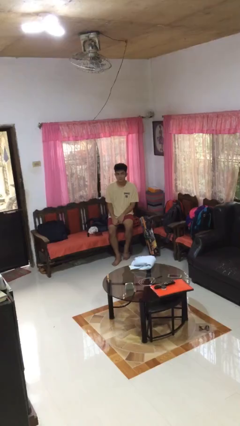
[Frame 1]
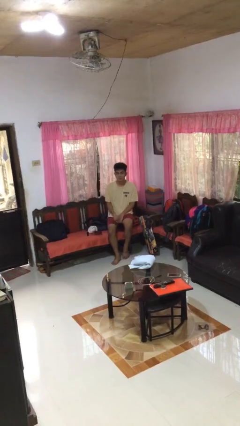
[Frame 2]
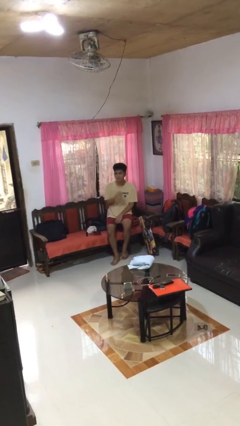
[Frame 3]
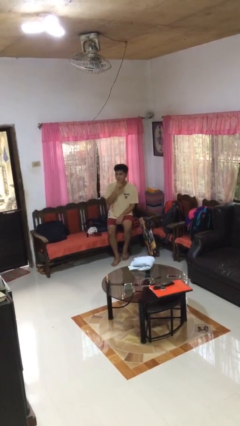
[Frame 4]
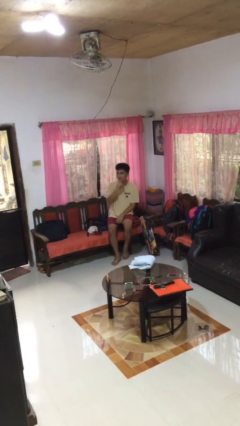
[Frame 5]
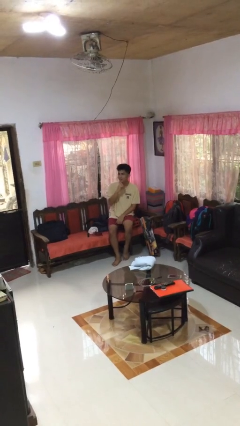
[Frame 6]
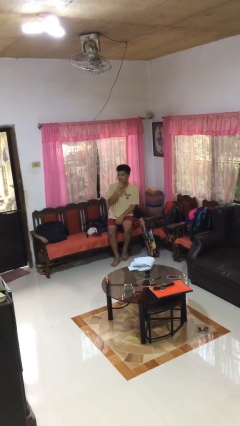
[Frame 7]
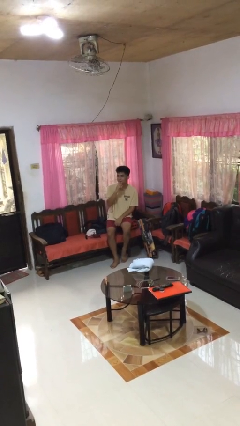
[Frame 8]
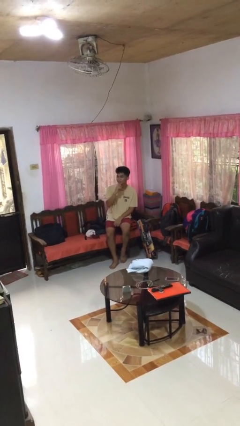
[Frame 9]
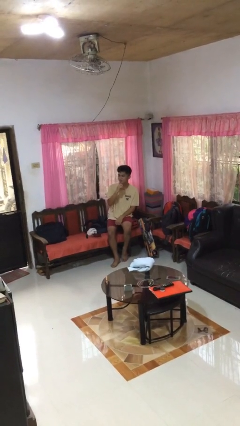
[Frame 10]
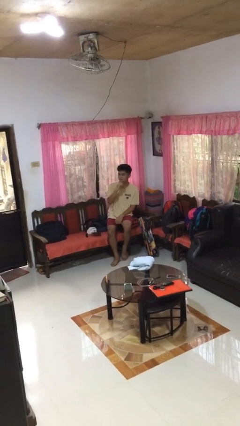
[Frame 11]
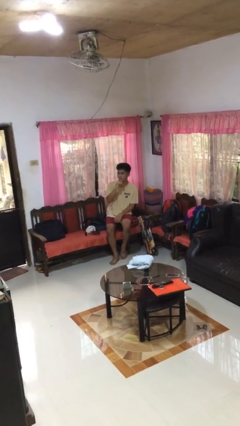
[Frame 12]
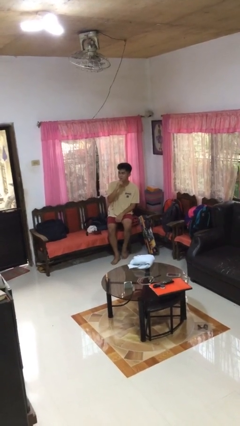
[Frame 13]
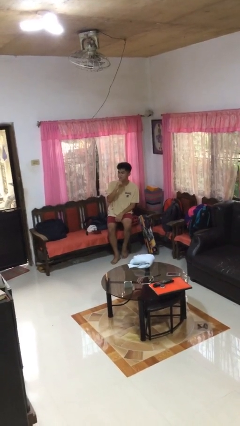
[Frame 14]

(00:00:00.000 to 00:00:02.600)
person strokes chin

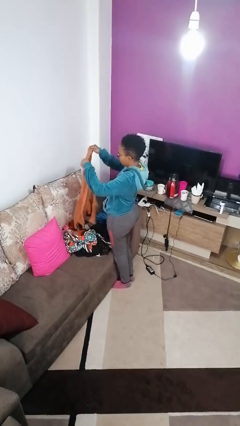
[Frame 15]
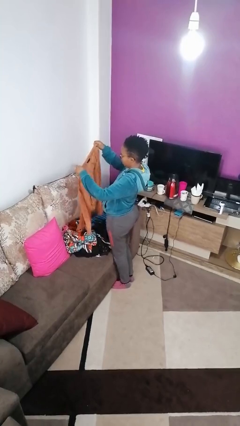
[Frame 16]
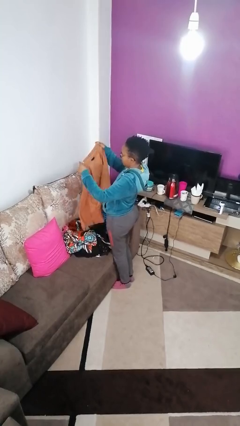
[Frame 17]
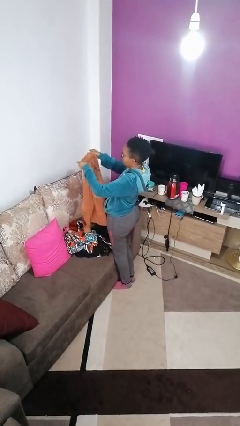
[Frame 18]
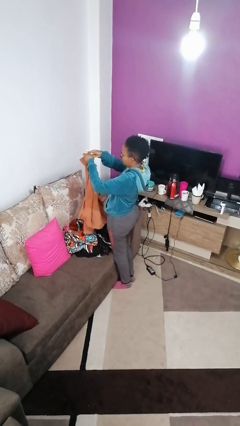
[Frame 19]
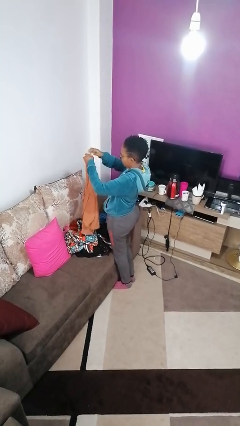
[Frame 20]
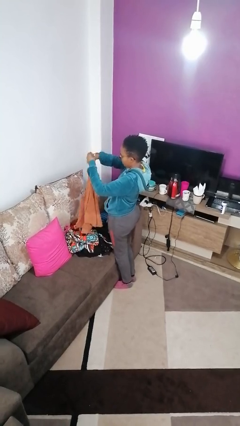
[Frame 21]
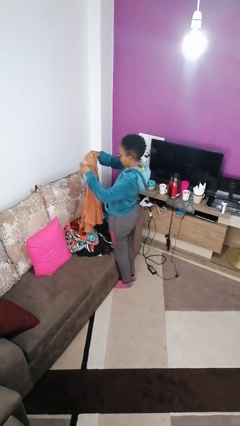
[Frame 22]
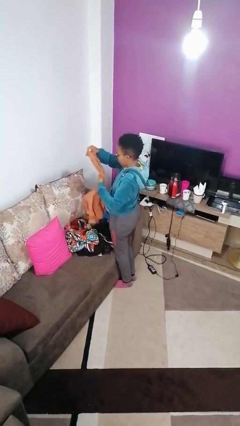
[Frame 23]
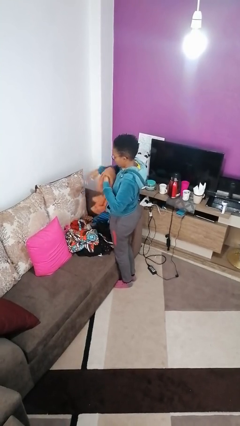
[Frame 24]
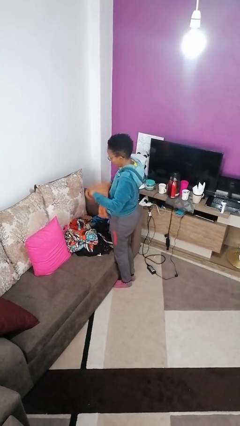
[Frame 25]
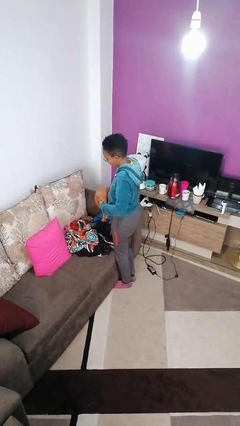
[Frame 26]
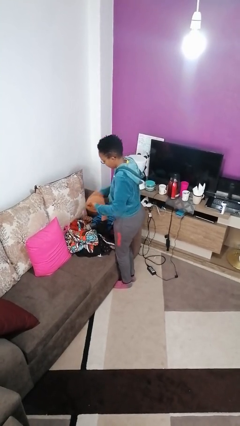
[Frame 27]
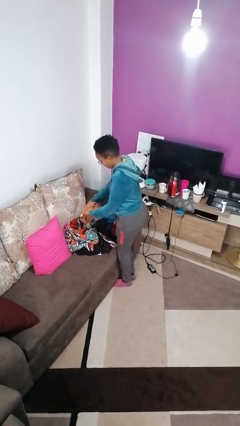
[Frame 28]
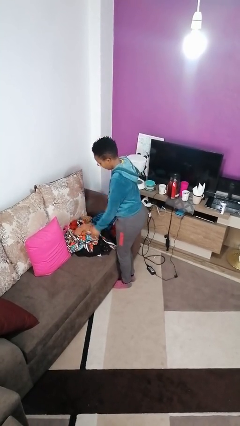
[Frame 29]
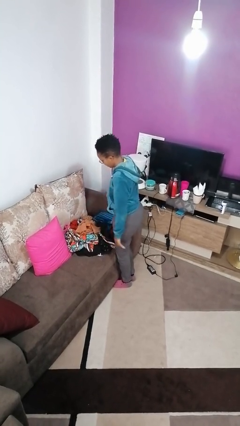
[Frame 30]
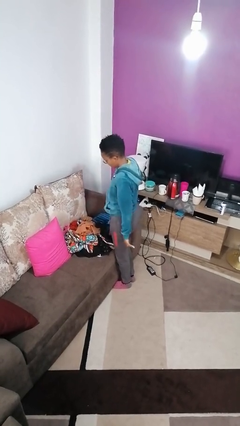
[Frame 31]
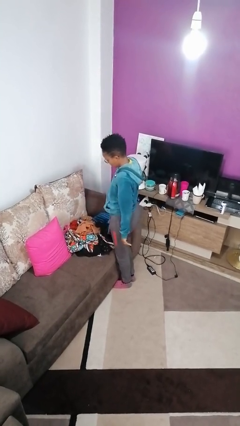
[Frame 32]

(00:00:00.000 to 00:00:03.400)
person folds shirt

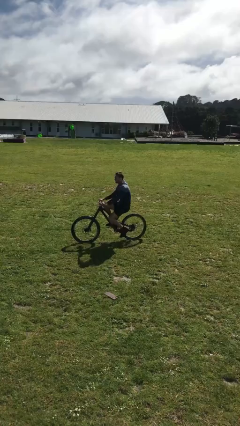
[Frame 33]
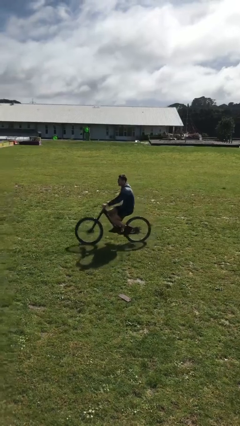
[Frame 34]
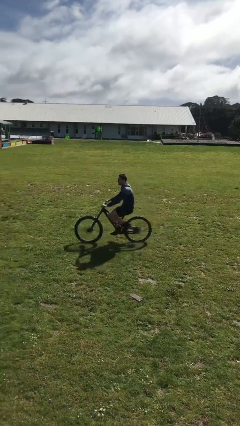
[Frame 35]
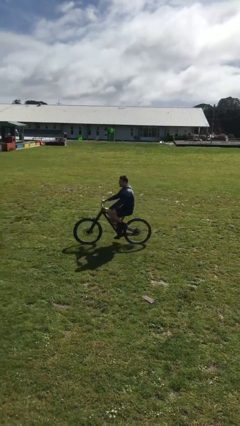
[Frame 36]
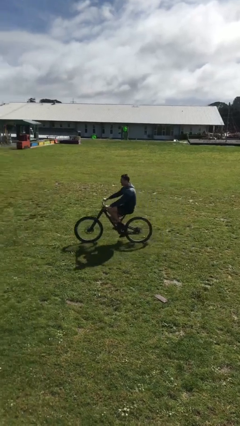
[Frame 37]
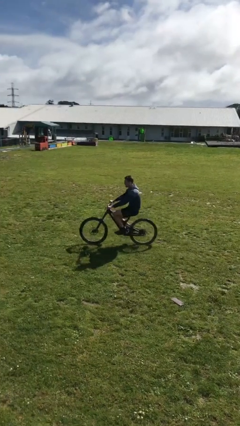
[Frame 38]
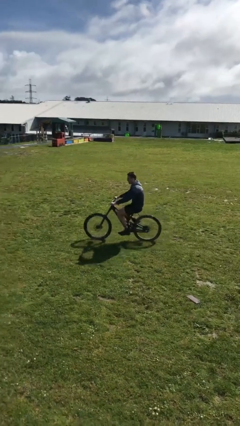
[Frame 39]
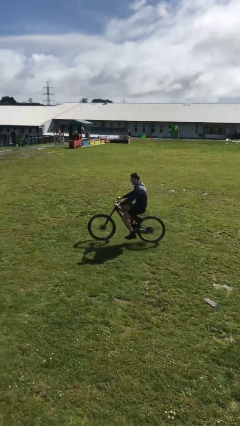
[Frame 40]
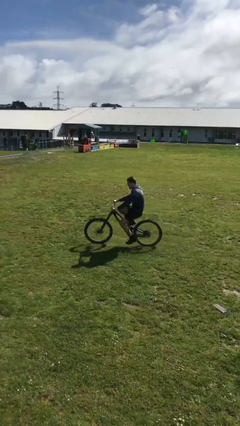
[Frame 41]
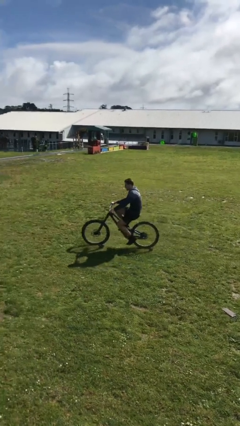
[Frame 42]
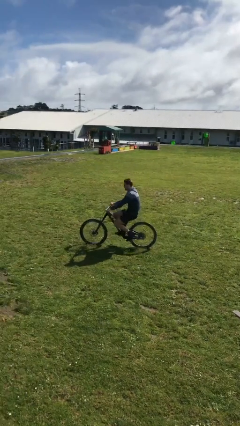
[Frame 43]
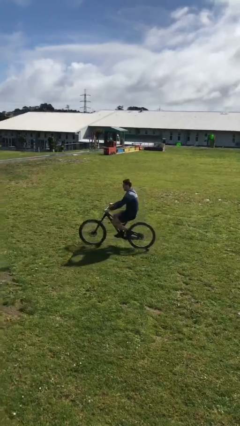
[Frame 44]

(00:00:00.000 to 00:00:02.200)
person rides bicycle

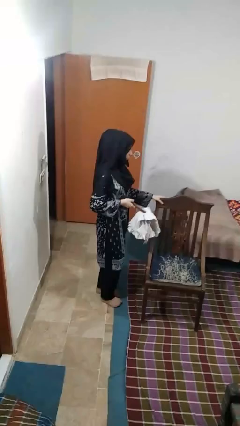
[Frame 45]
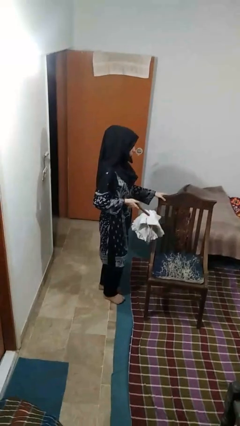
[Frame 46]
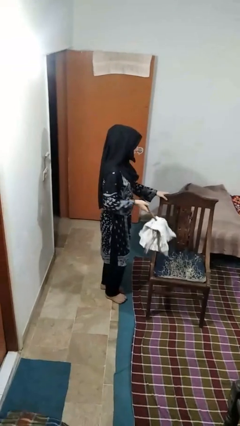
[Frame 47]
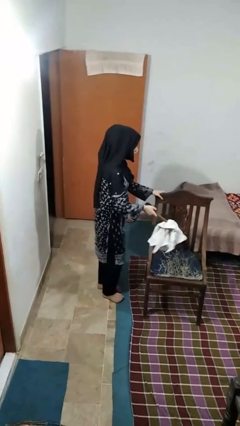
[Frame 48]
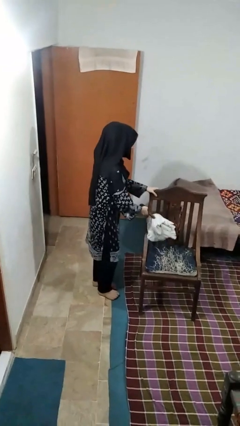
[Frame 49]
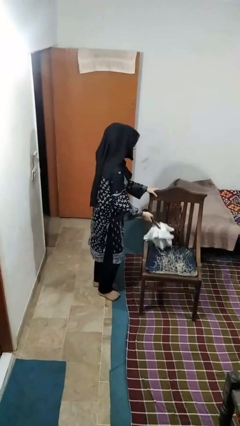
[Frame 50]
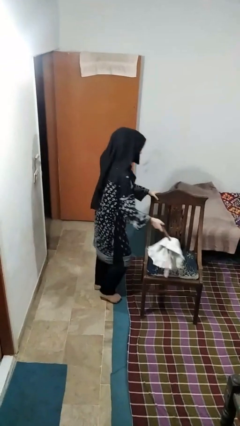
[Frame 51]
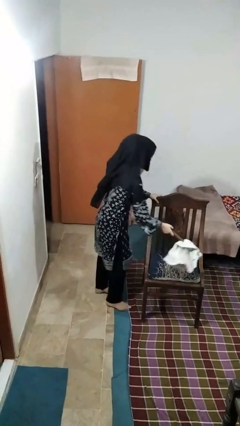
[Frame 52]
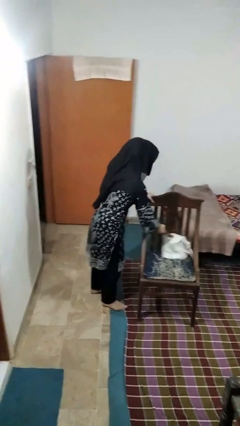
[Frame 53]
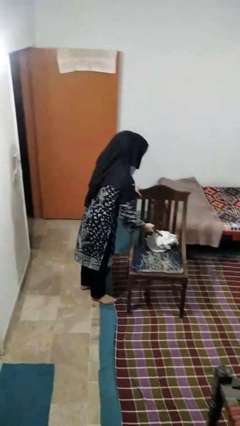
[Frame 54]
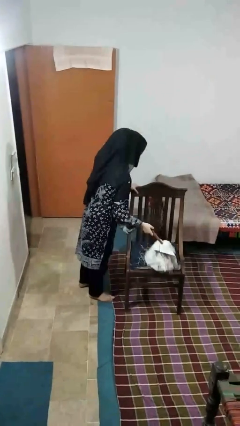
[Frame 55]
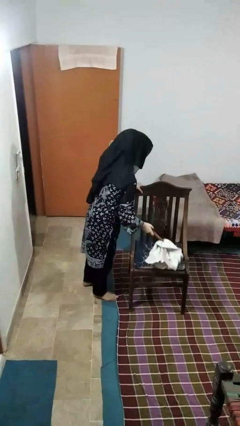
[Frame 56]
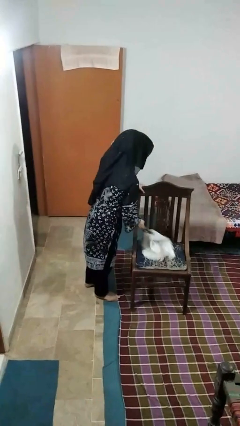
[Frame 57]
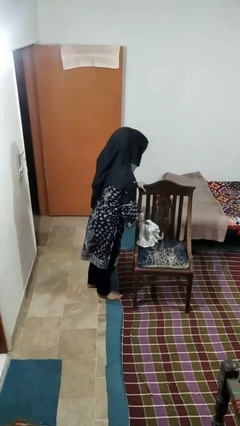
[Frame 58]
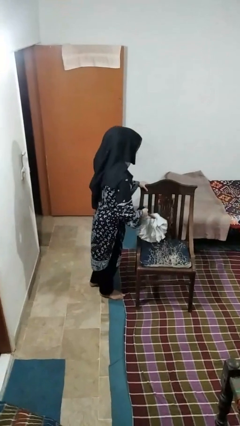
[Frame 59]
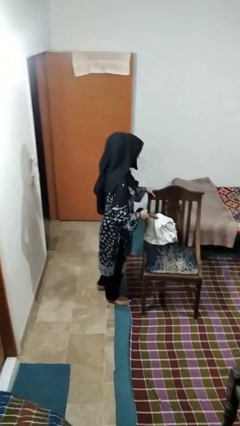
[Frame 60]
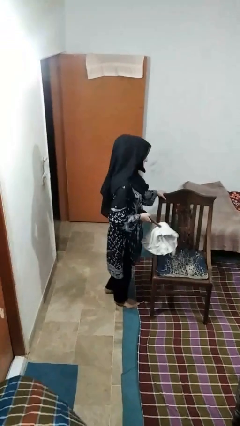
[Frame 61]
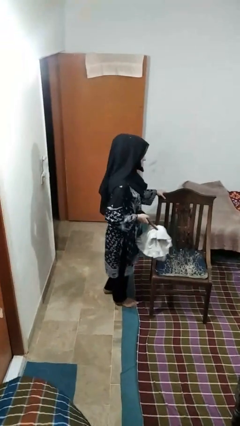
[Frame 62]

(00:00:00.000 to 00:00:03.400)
person dusts furniture

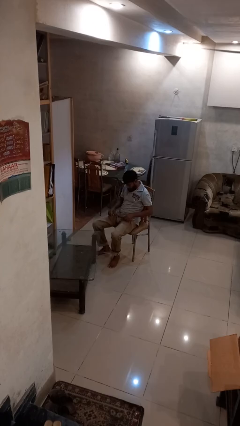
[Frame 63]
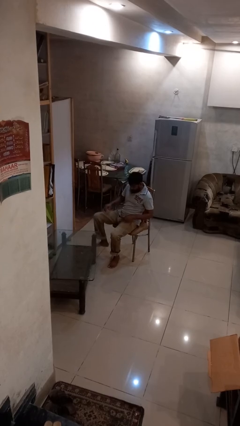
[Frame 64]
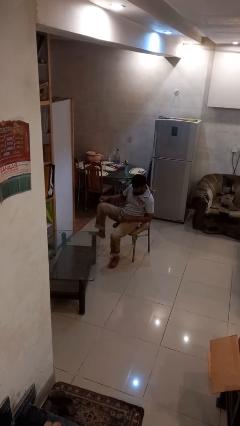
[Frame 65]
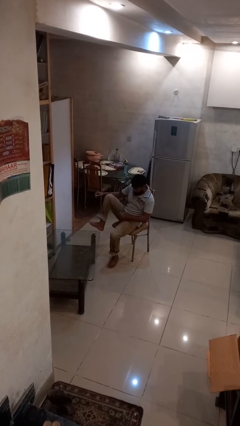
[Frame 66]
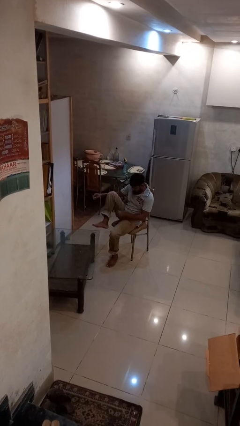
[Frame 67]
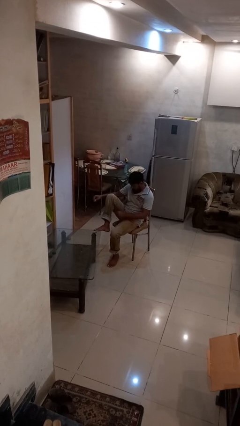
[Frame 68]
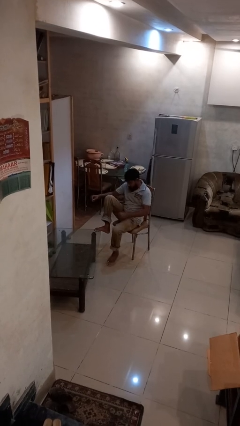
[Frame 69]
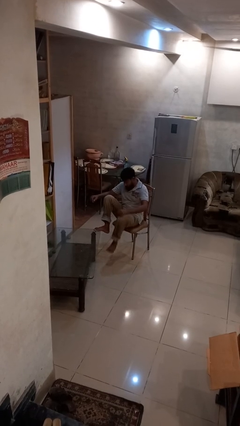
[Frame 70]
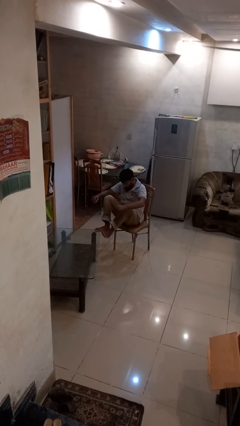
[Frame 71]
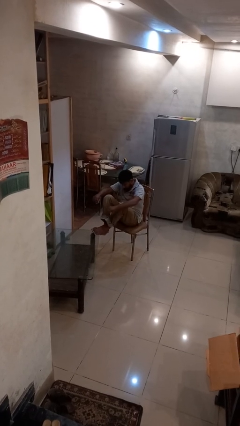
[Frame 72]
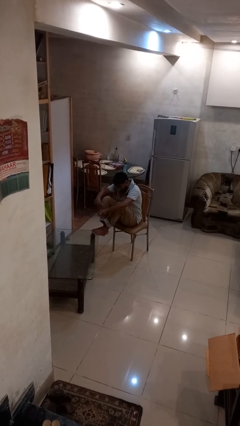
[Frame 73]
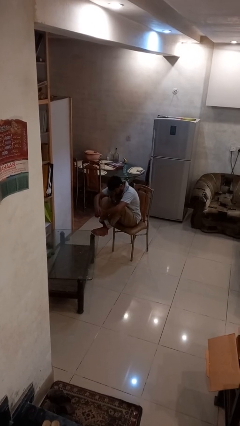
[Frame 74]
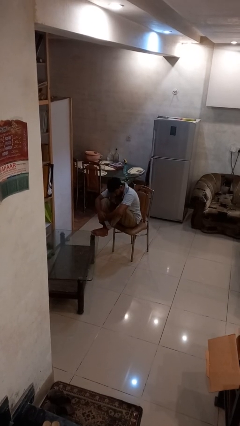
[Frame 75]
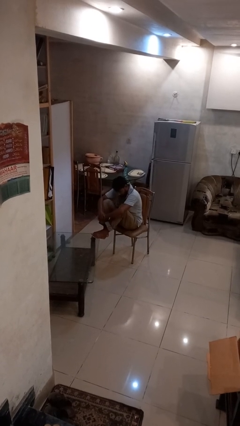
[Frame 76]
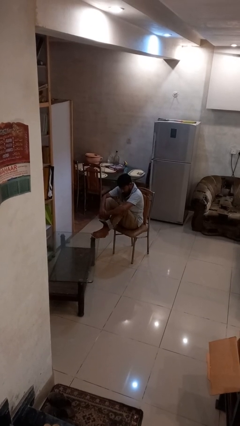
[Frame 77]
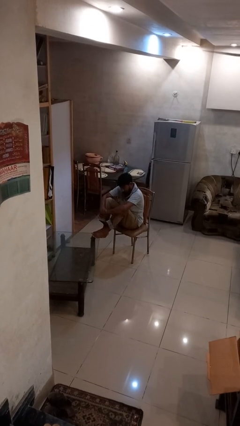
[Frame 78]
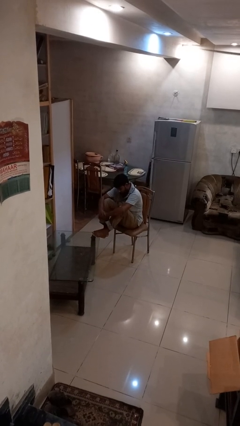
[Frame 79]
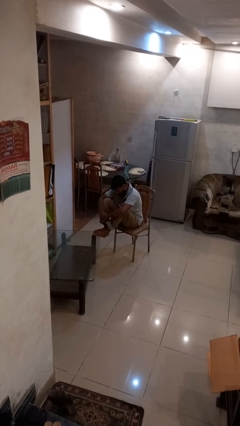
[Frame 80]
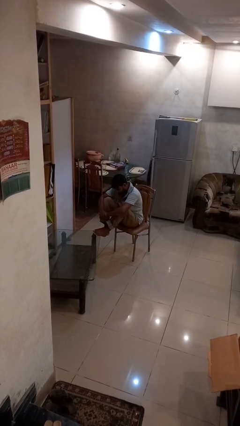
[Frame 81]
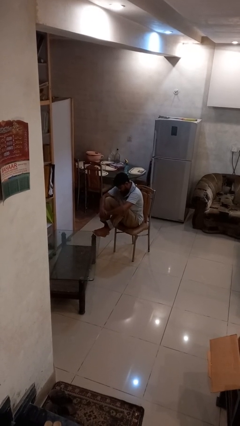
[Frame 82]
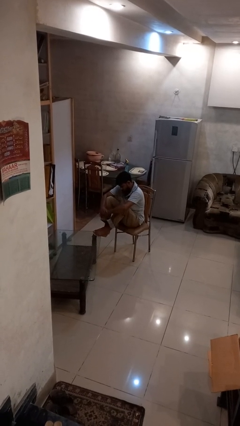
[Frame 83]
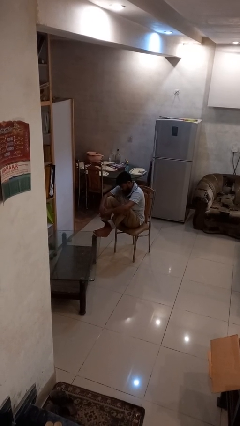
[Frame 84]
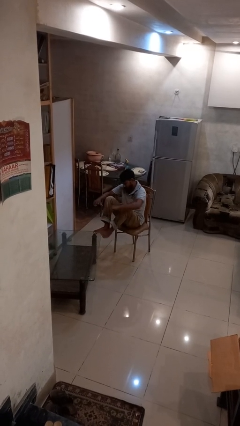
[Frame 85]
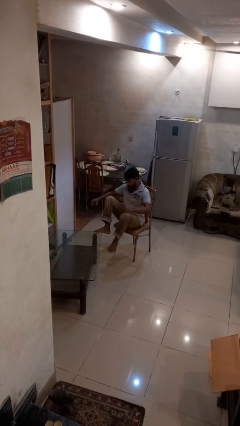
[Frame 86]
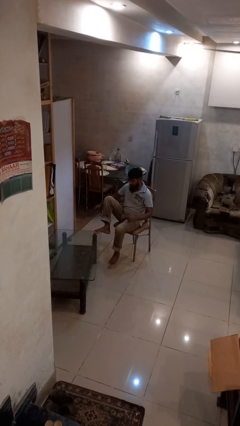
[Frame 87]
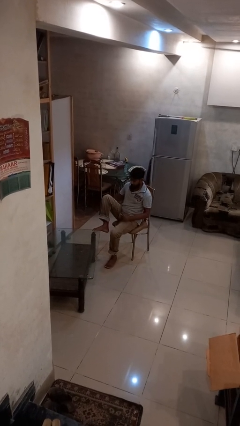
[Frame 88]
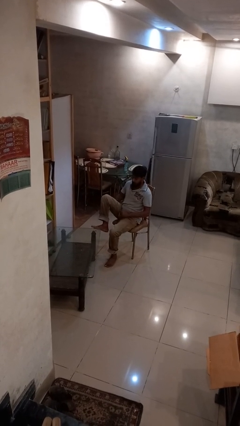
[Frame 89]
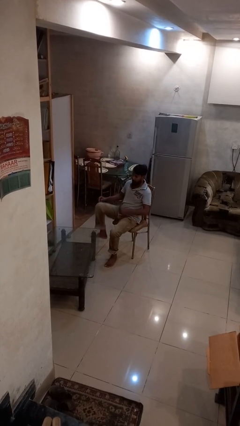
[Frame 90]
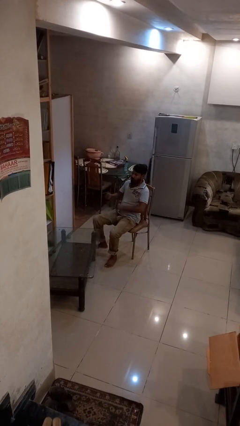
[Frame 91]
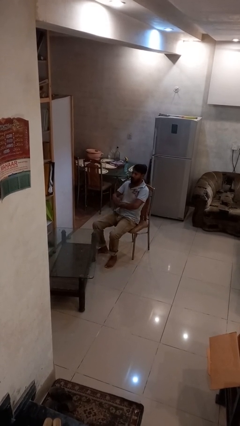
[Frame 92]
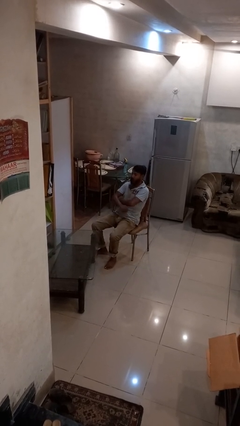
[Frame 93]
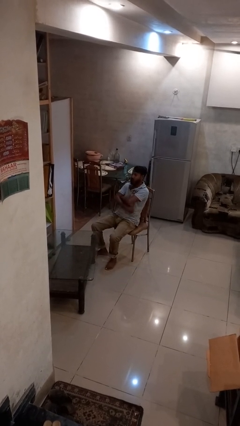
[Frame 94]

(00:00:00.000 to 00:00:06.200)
person puts feet up
